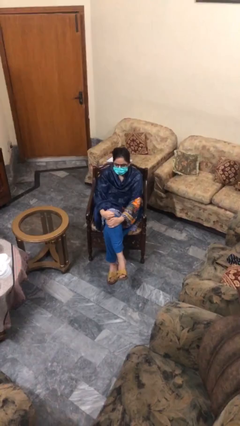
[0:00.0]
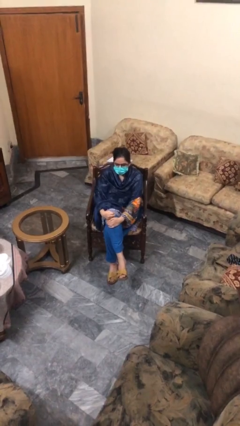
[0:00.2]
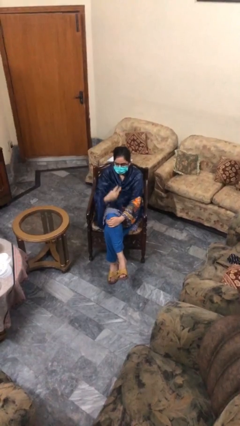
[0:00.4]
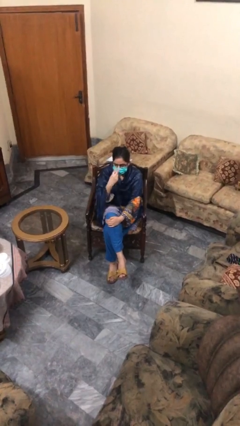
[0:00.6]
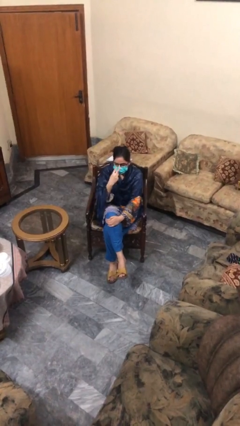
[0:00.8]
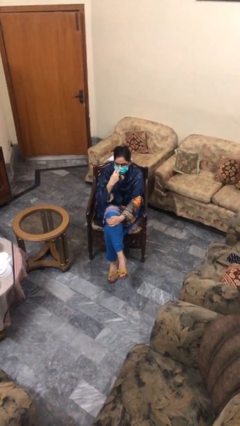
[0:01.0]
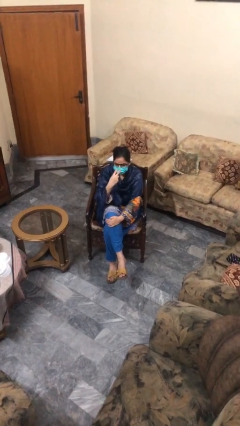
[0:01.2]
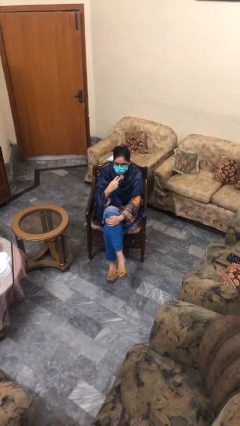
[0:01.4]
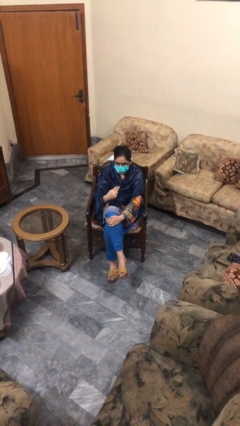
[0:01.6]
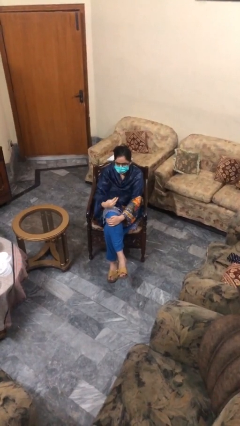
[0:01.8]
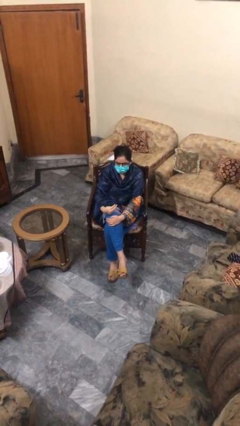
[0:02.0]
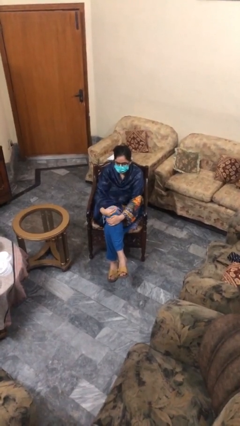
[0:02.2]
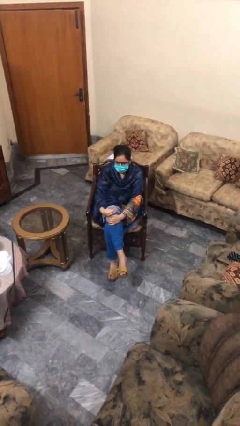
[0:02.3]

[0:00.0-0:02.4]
person gestures watch closely

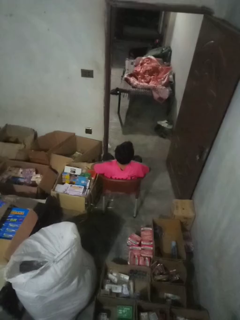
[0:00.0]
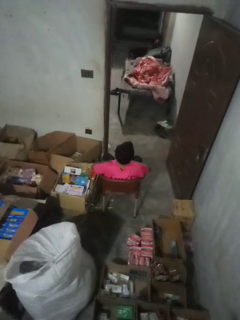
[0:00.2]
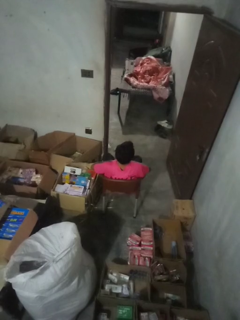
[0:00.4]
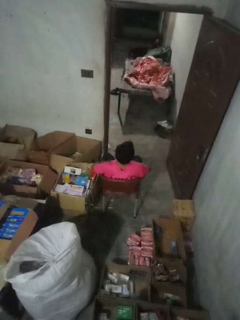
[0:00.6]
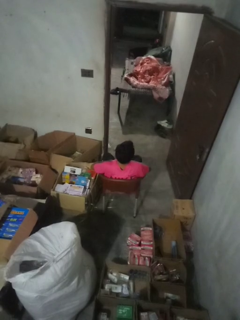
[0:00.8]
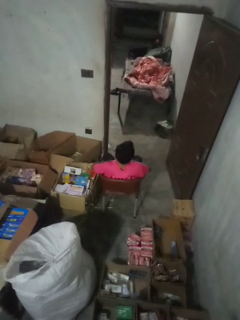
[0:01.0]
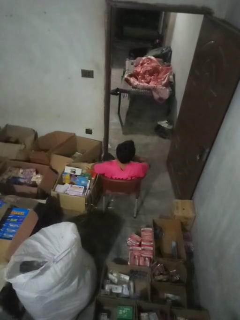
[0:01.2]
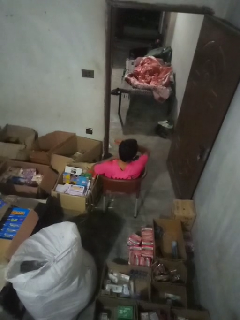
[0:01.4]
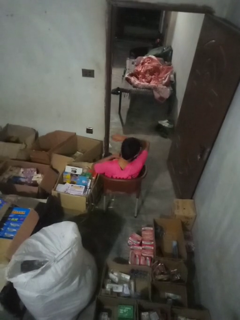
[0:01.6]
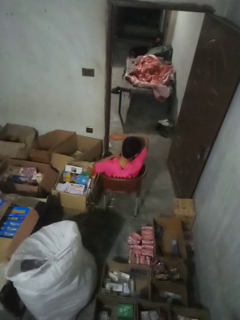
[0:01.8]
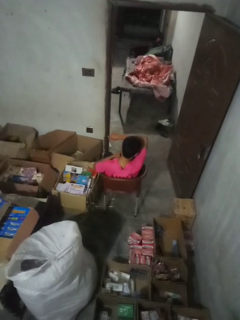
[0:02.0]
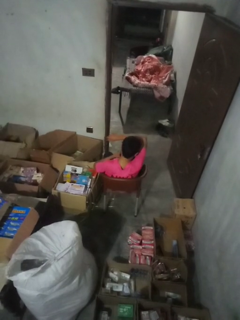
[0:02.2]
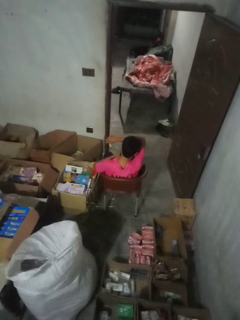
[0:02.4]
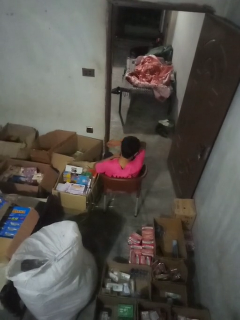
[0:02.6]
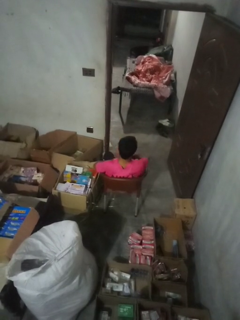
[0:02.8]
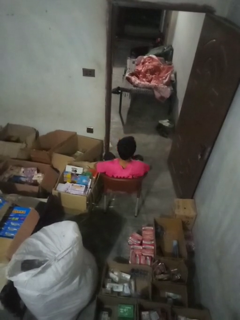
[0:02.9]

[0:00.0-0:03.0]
person sneezes into arm

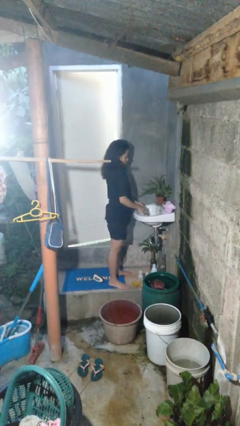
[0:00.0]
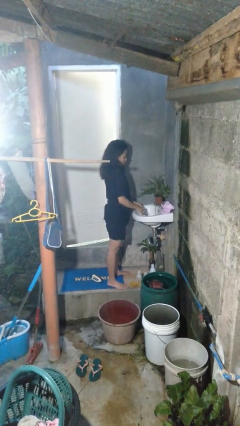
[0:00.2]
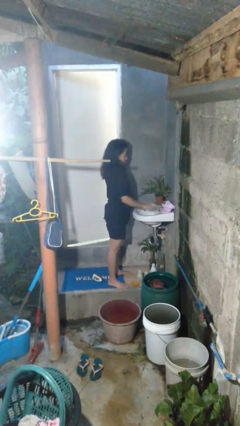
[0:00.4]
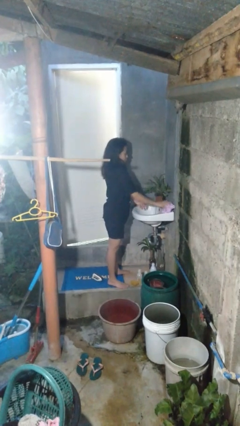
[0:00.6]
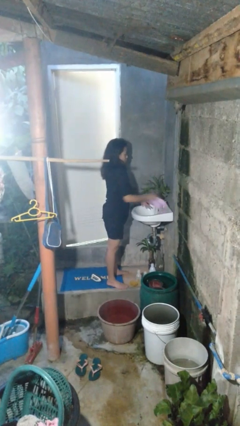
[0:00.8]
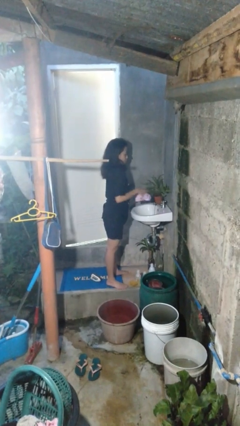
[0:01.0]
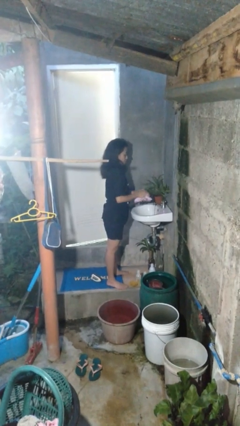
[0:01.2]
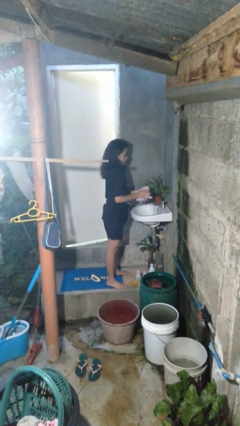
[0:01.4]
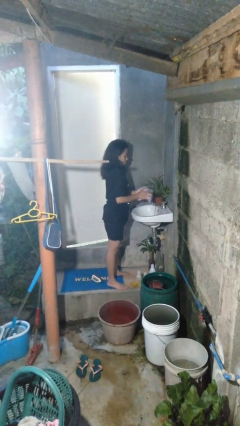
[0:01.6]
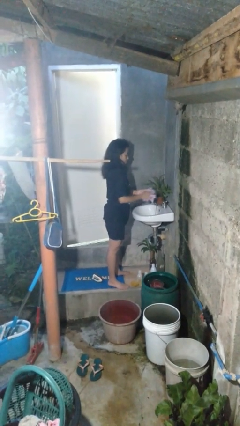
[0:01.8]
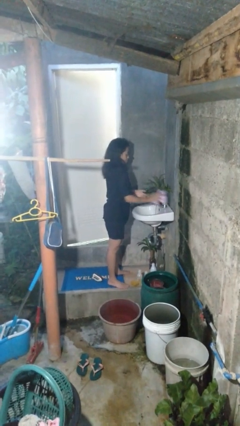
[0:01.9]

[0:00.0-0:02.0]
person dries hands with towel

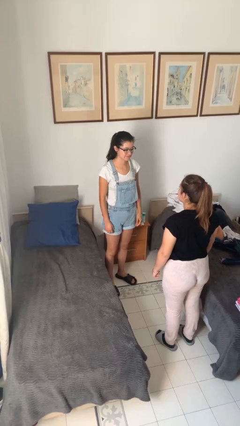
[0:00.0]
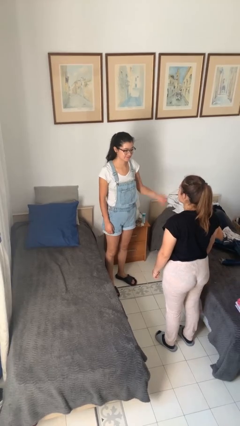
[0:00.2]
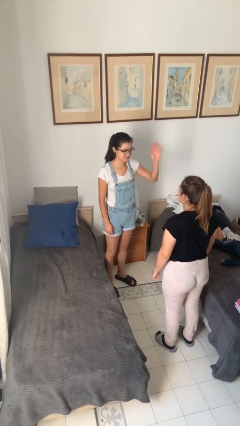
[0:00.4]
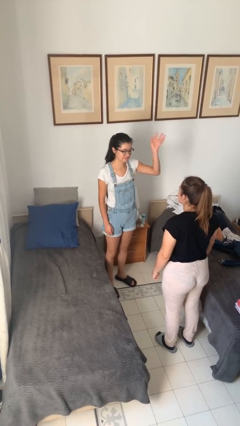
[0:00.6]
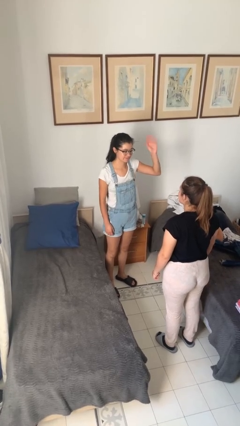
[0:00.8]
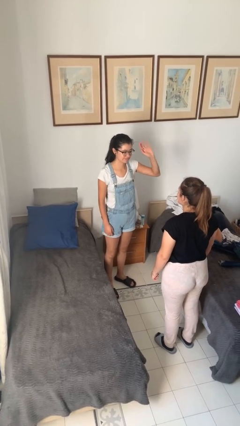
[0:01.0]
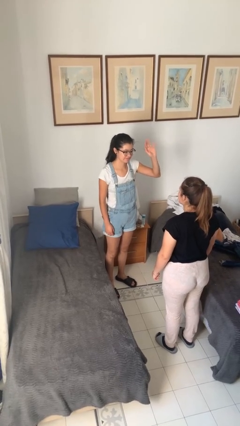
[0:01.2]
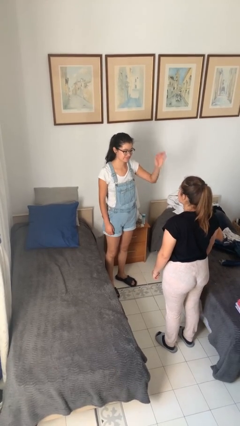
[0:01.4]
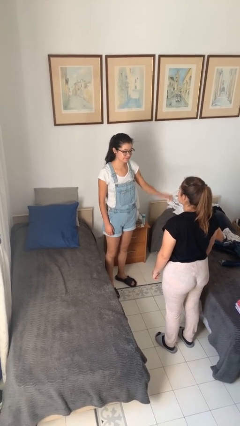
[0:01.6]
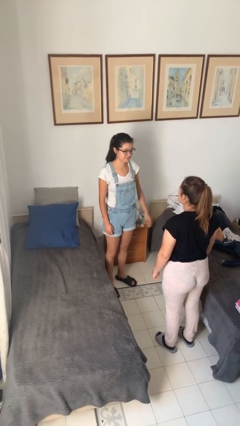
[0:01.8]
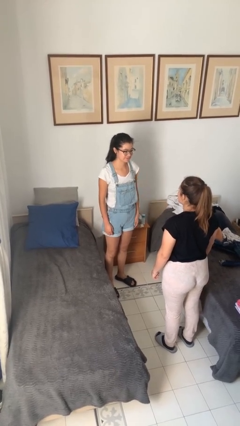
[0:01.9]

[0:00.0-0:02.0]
person waves at person

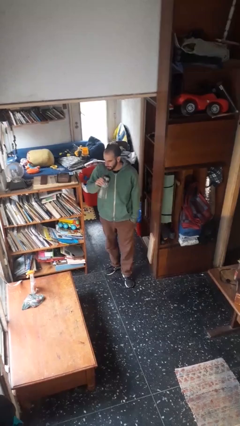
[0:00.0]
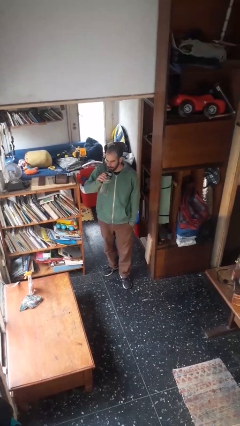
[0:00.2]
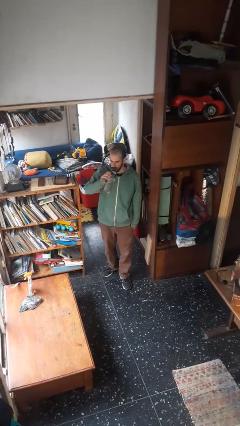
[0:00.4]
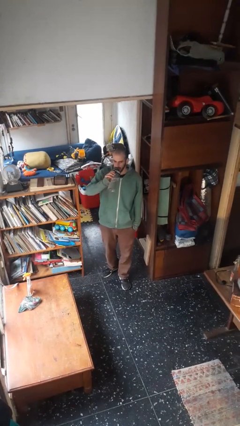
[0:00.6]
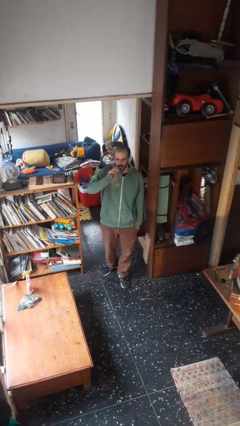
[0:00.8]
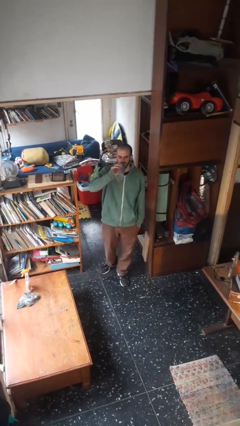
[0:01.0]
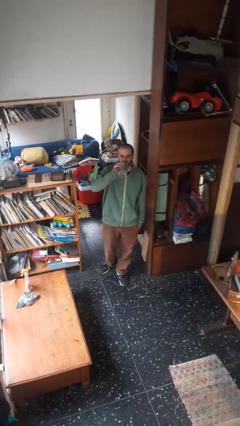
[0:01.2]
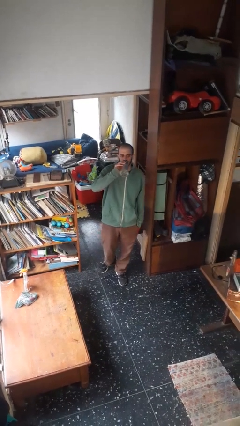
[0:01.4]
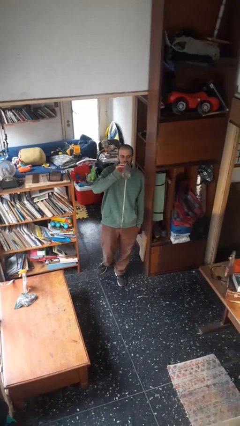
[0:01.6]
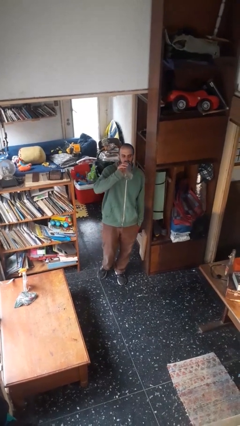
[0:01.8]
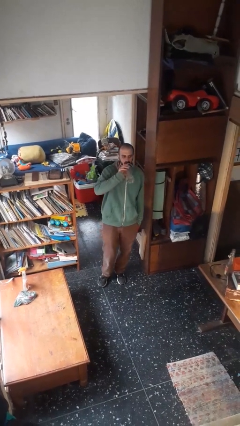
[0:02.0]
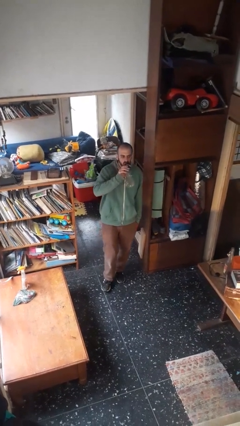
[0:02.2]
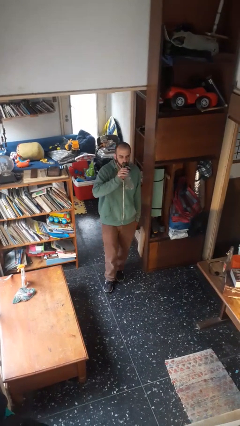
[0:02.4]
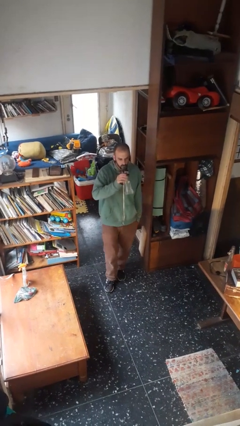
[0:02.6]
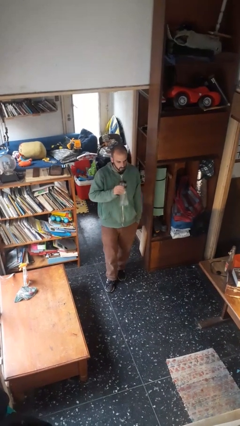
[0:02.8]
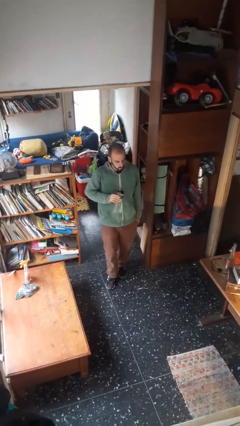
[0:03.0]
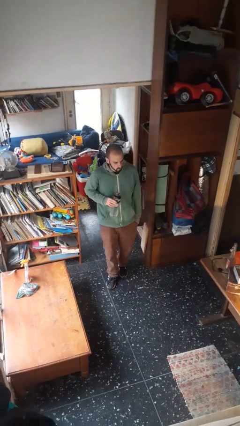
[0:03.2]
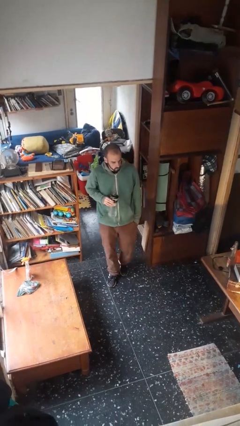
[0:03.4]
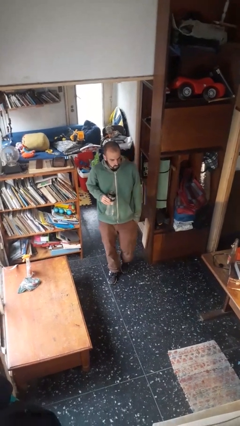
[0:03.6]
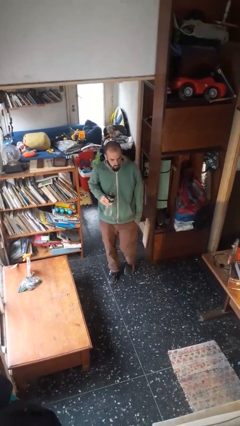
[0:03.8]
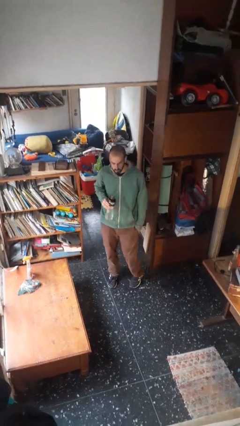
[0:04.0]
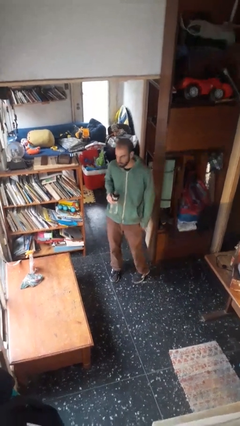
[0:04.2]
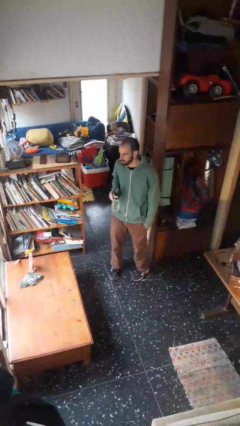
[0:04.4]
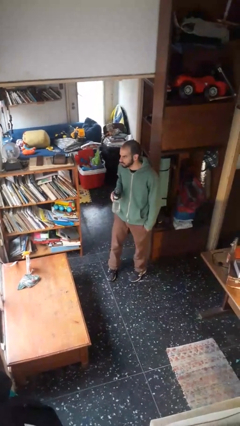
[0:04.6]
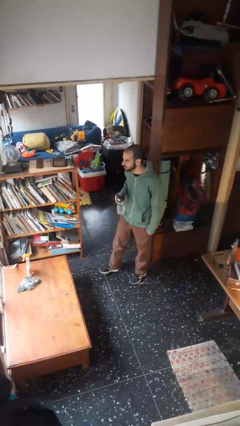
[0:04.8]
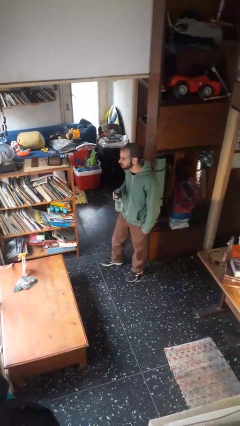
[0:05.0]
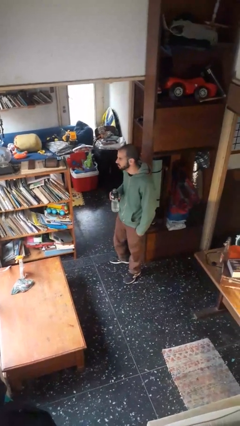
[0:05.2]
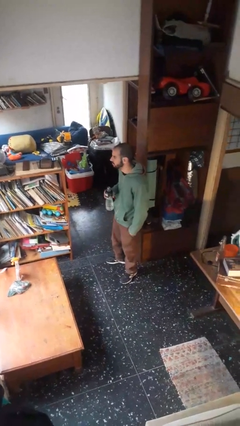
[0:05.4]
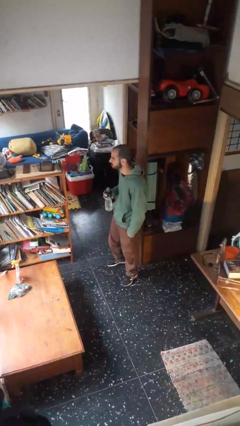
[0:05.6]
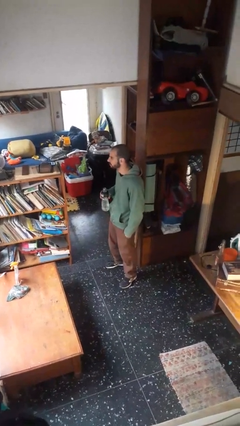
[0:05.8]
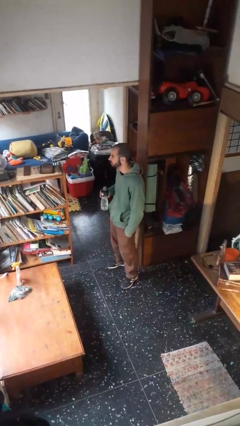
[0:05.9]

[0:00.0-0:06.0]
person drinks from bottle

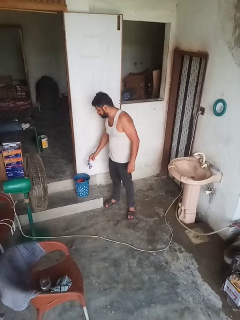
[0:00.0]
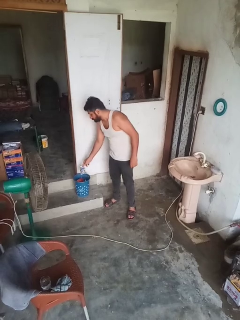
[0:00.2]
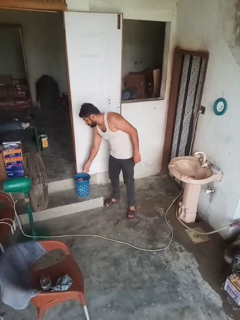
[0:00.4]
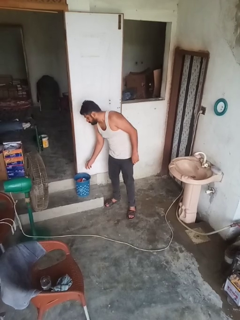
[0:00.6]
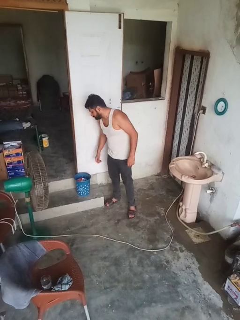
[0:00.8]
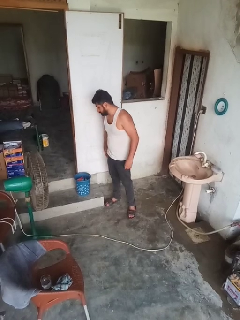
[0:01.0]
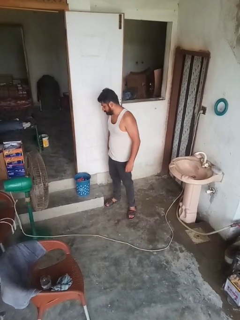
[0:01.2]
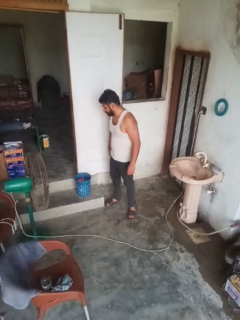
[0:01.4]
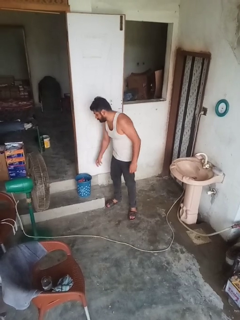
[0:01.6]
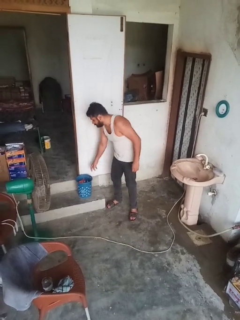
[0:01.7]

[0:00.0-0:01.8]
person discards trash

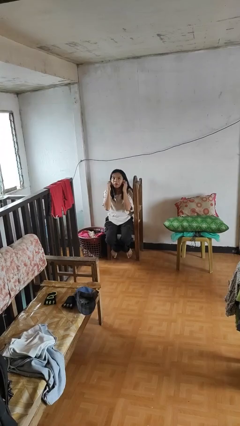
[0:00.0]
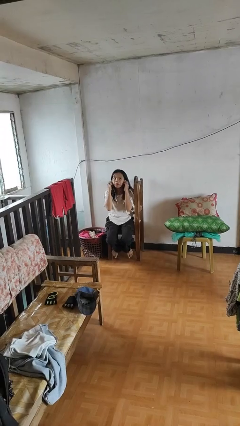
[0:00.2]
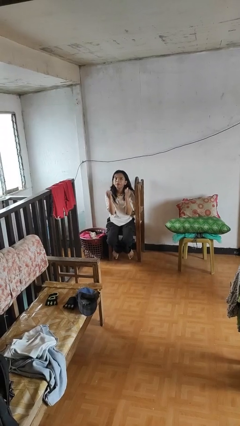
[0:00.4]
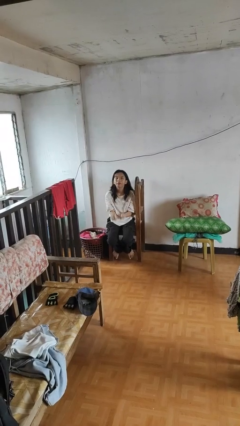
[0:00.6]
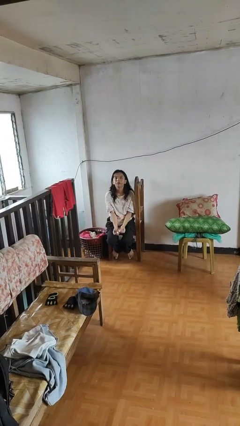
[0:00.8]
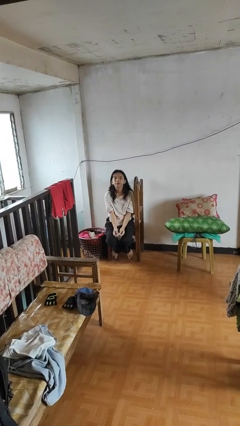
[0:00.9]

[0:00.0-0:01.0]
person takes off headphones
